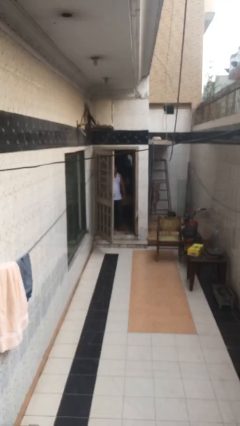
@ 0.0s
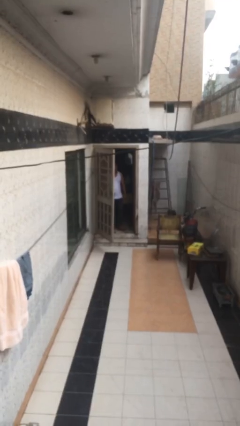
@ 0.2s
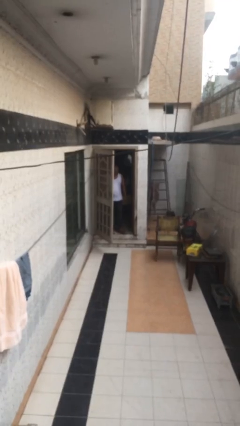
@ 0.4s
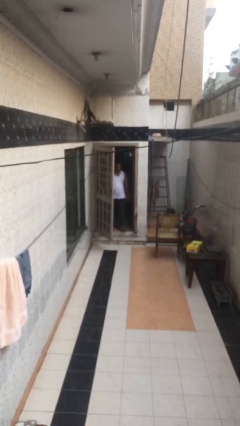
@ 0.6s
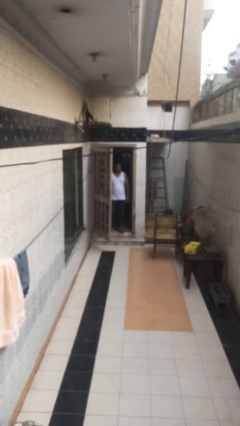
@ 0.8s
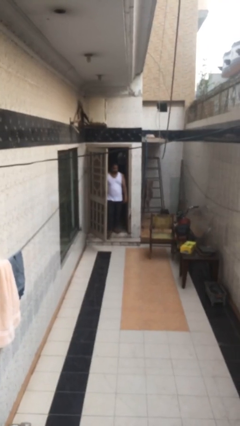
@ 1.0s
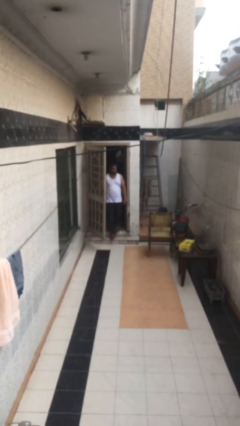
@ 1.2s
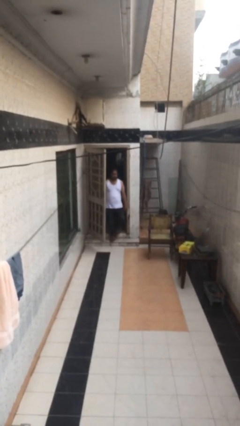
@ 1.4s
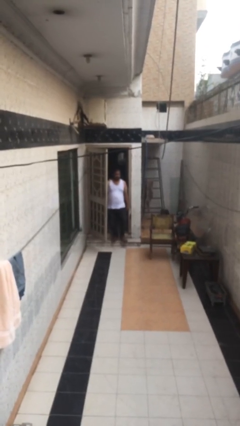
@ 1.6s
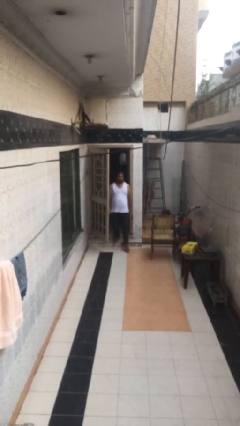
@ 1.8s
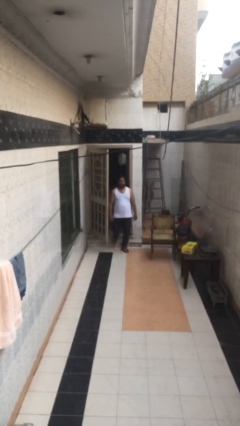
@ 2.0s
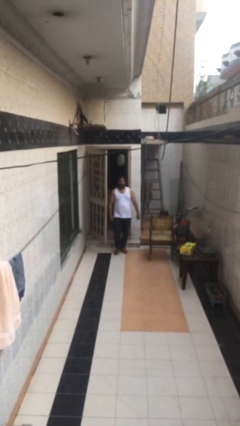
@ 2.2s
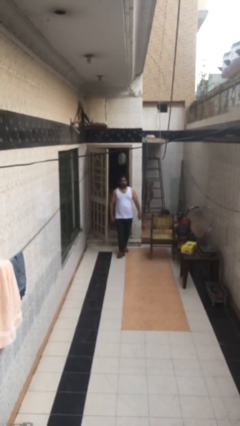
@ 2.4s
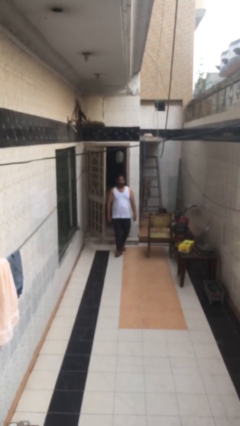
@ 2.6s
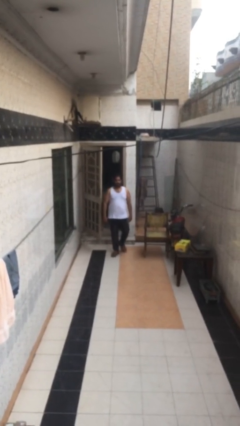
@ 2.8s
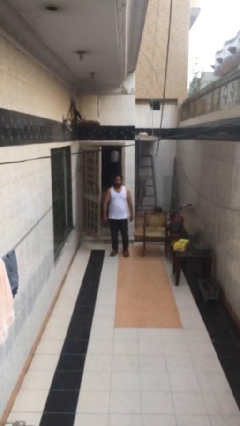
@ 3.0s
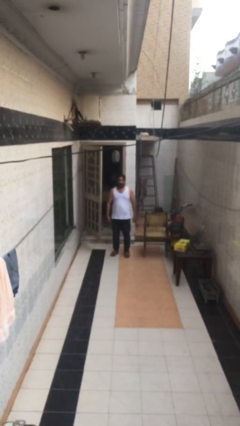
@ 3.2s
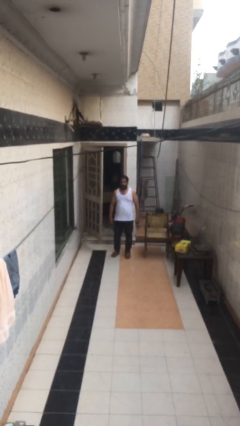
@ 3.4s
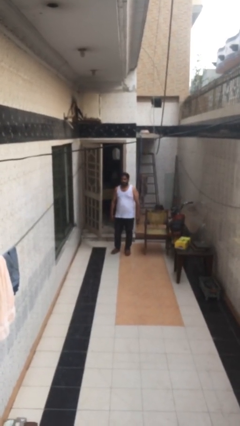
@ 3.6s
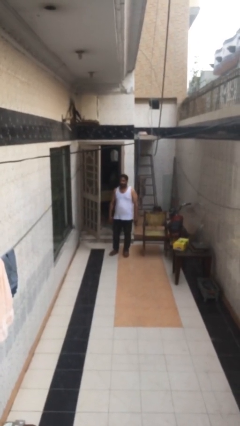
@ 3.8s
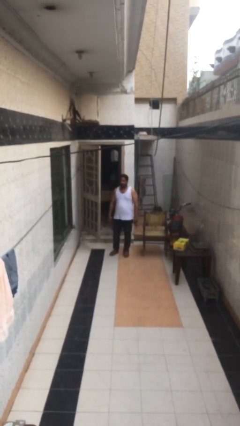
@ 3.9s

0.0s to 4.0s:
person enters scene through structure

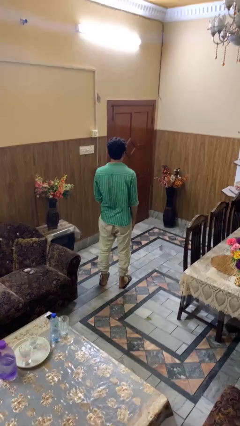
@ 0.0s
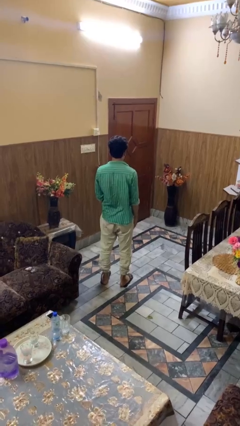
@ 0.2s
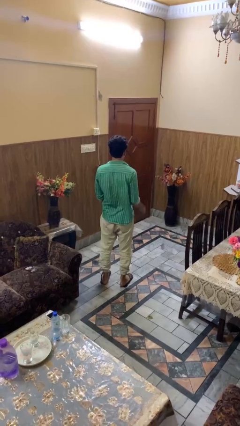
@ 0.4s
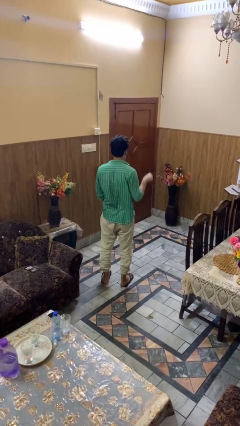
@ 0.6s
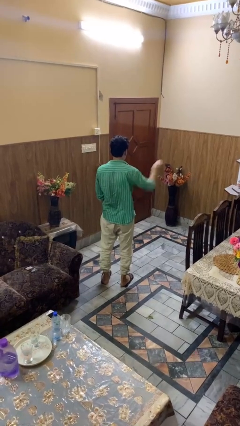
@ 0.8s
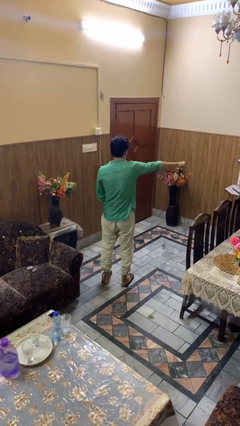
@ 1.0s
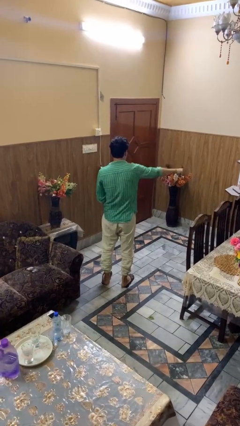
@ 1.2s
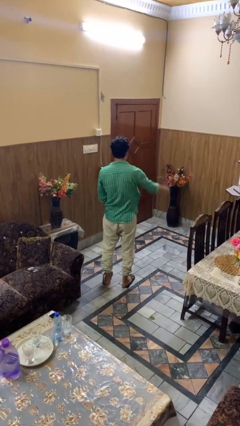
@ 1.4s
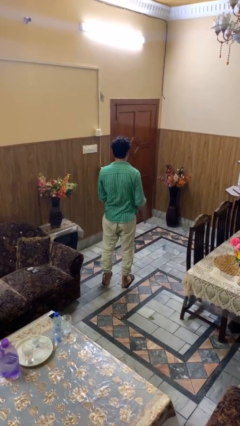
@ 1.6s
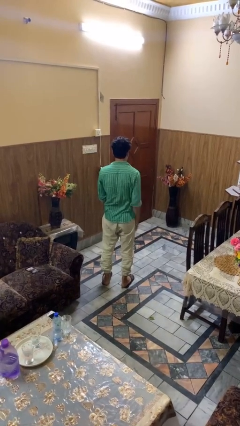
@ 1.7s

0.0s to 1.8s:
person punches

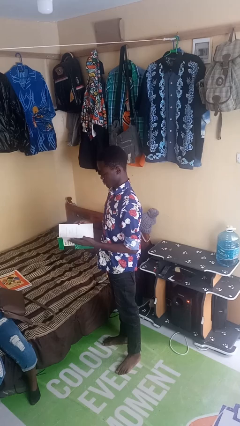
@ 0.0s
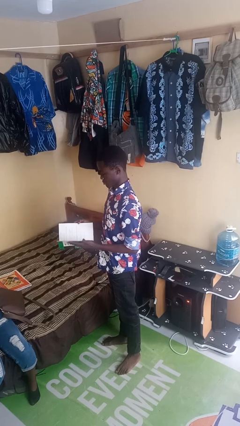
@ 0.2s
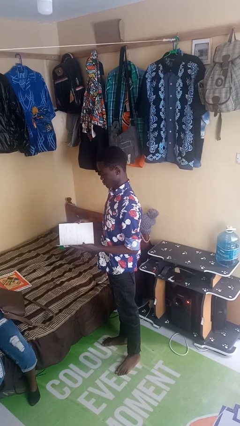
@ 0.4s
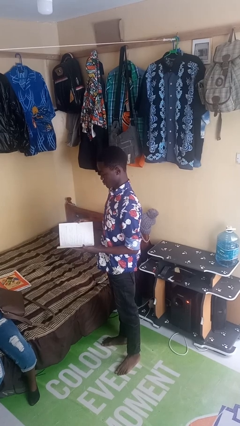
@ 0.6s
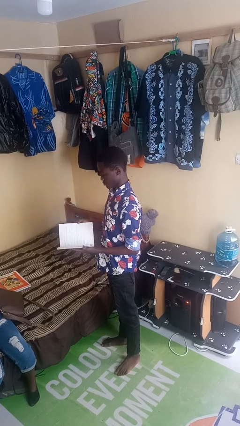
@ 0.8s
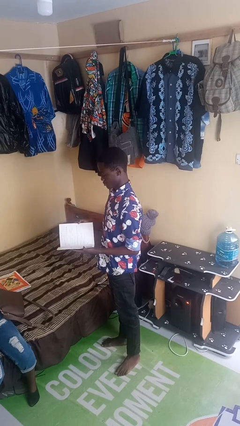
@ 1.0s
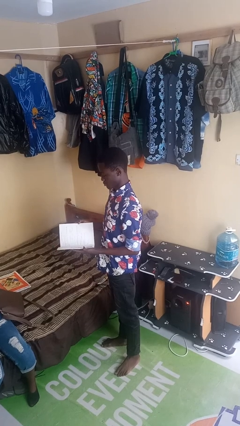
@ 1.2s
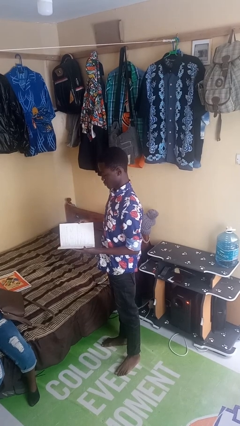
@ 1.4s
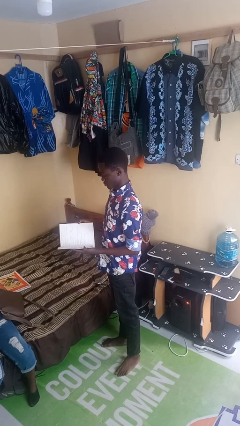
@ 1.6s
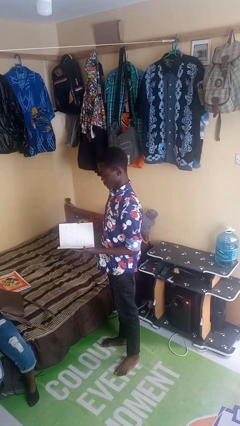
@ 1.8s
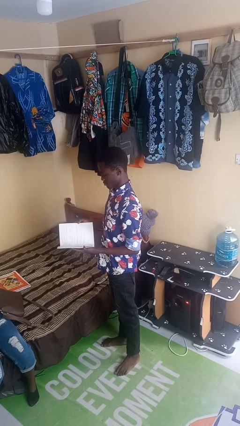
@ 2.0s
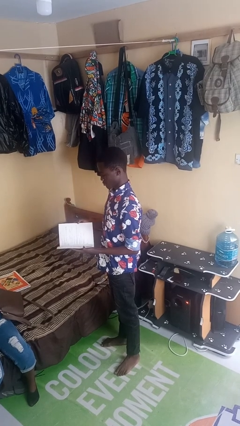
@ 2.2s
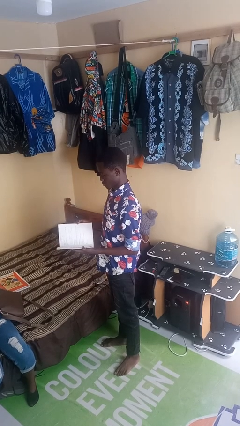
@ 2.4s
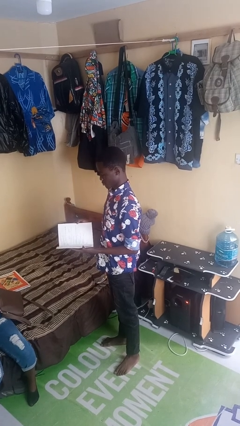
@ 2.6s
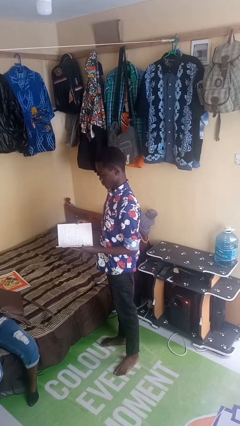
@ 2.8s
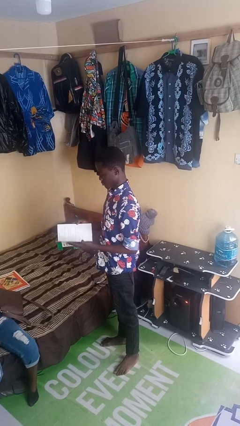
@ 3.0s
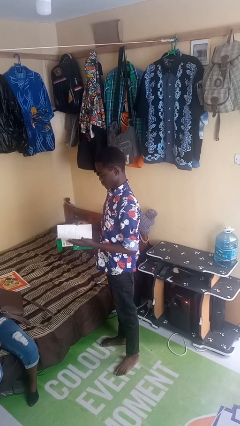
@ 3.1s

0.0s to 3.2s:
person reads magazine

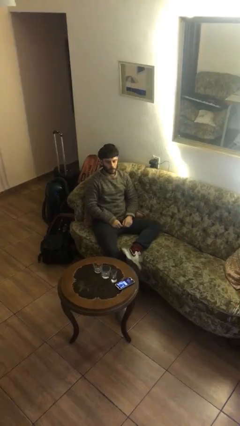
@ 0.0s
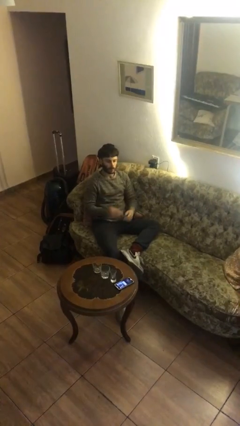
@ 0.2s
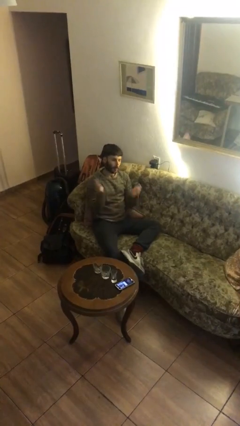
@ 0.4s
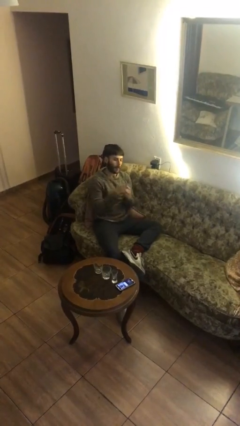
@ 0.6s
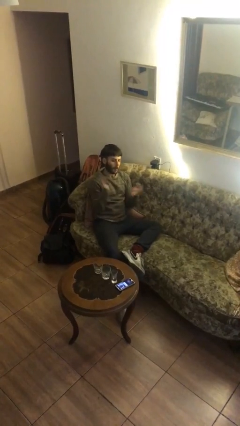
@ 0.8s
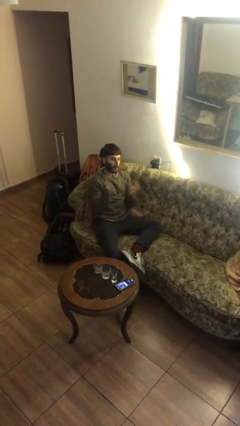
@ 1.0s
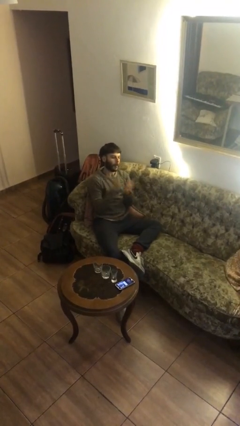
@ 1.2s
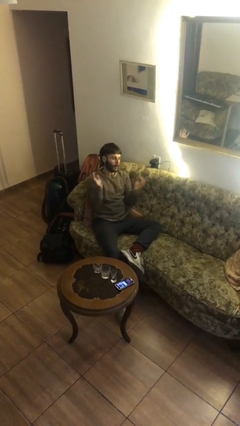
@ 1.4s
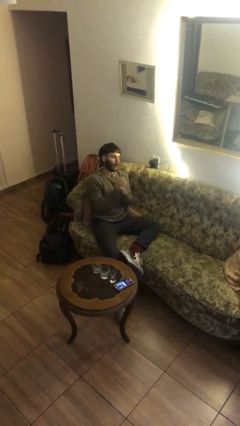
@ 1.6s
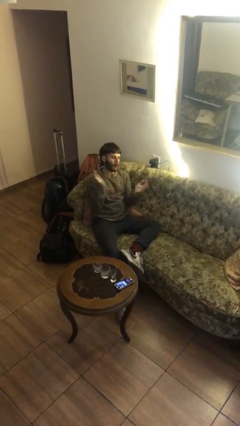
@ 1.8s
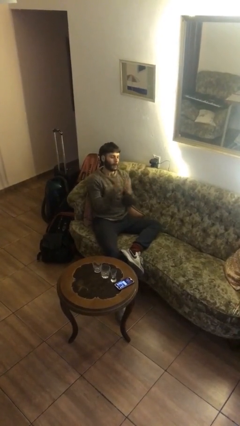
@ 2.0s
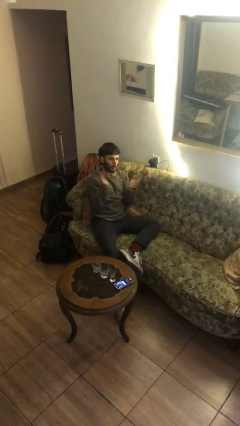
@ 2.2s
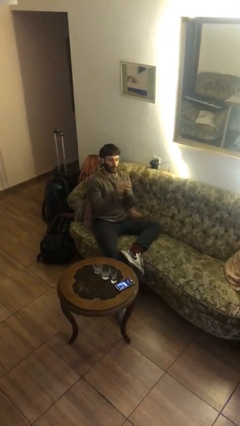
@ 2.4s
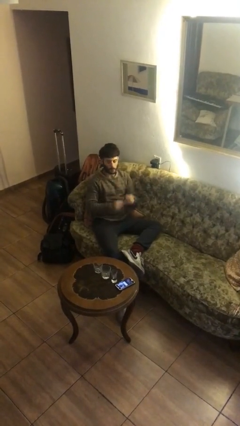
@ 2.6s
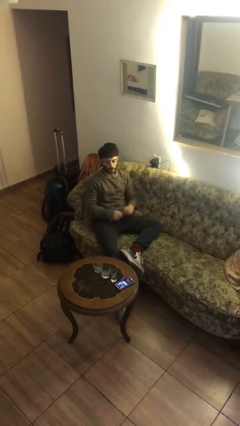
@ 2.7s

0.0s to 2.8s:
person claps hands

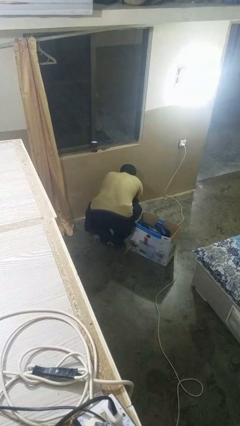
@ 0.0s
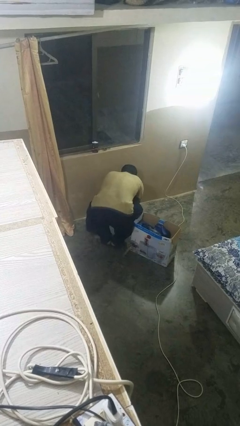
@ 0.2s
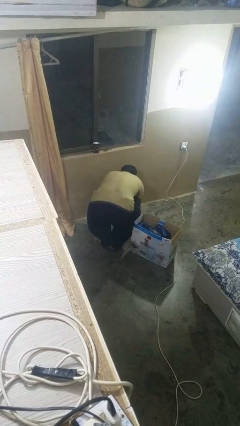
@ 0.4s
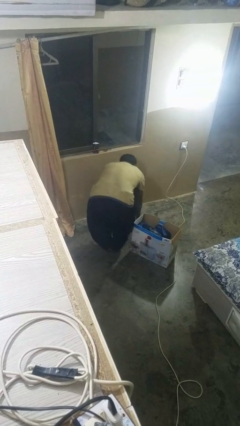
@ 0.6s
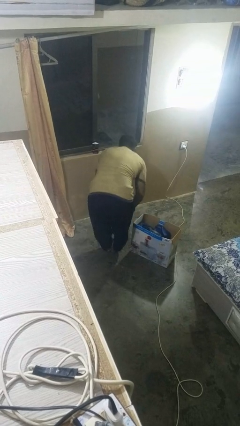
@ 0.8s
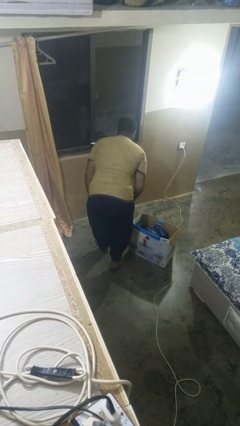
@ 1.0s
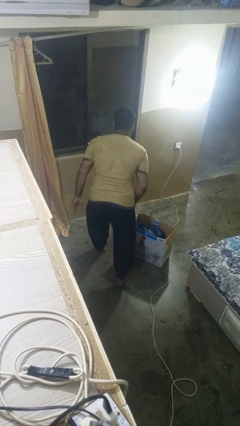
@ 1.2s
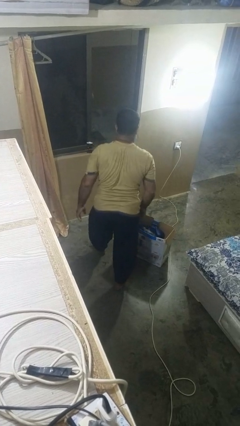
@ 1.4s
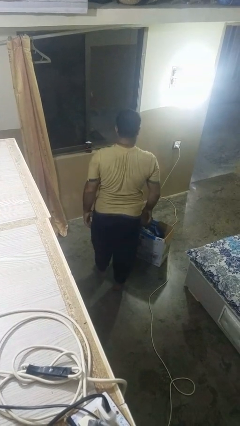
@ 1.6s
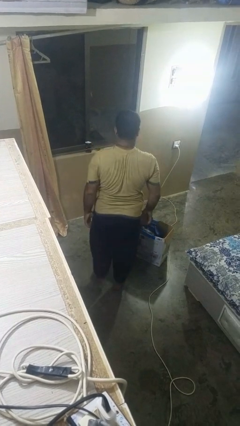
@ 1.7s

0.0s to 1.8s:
person stands up from floor

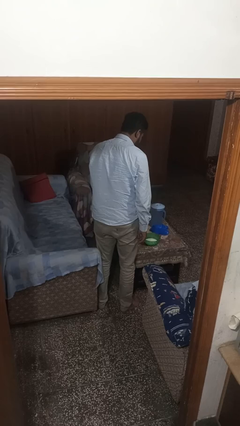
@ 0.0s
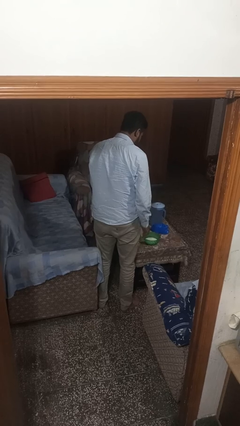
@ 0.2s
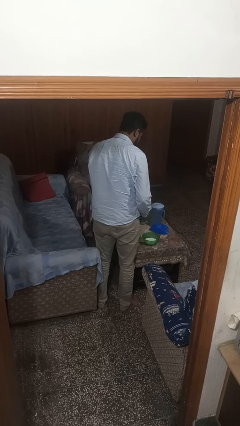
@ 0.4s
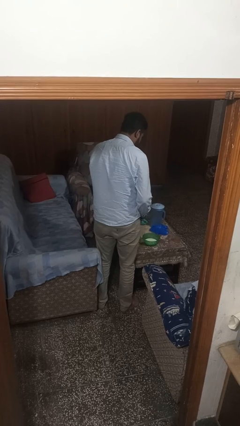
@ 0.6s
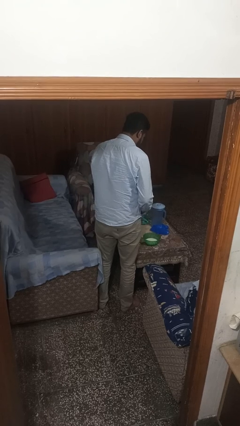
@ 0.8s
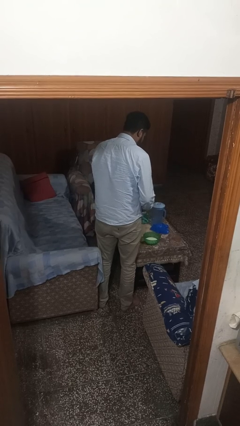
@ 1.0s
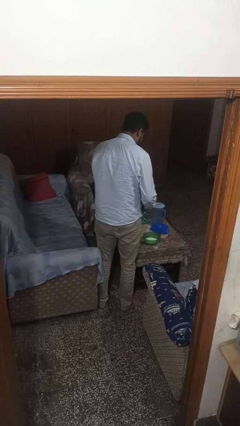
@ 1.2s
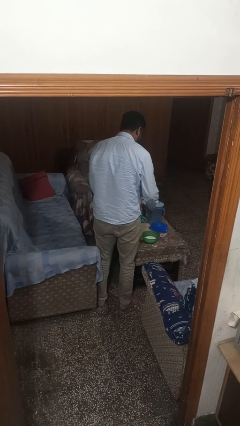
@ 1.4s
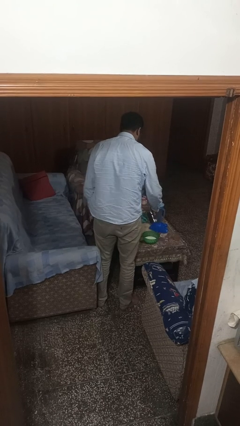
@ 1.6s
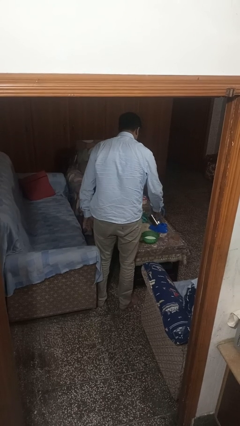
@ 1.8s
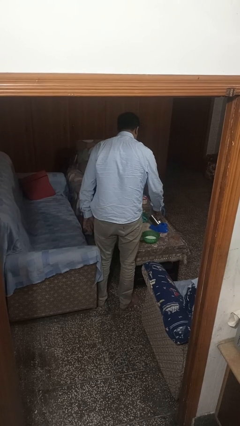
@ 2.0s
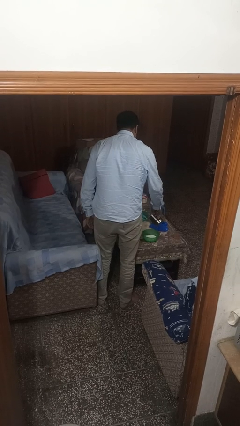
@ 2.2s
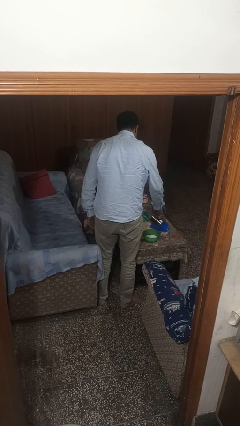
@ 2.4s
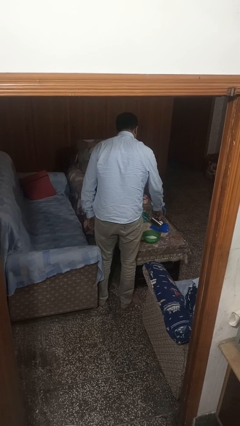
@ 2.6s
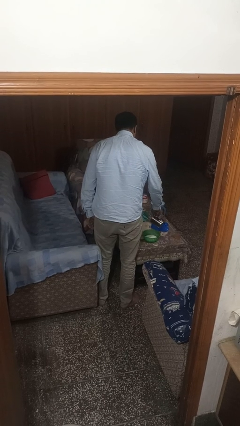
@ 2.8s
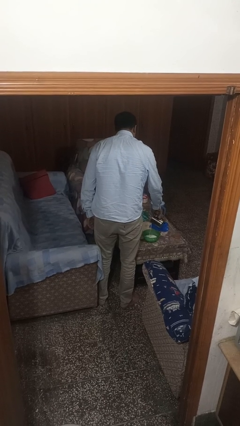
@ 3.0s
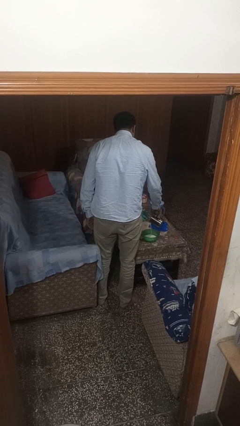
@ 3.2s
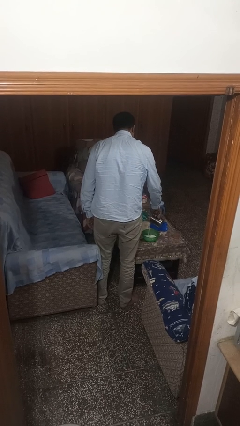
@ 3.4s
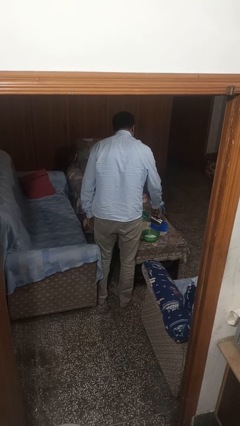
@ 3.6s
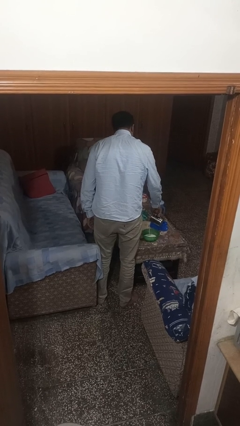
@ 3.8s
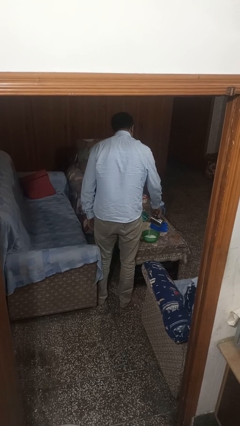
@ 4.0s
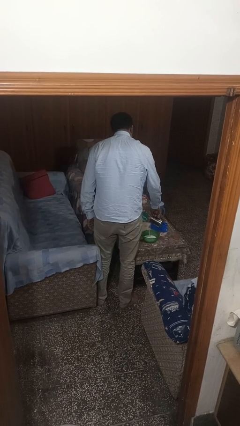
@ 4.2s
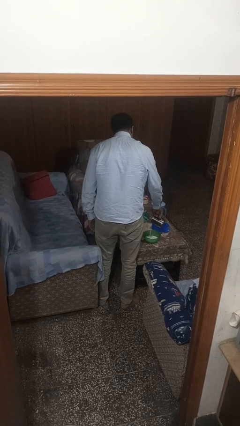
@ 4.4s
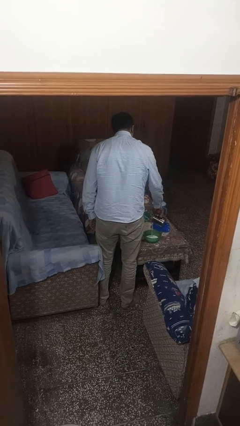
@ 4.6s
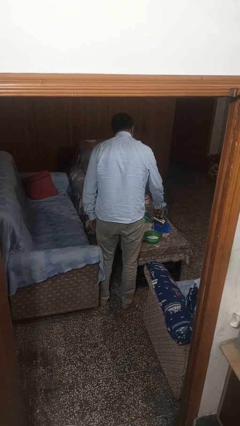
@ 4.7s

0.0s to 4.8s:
person pours into bowl
